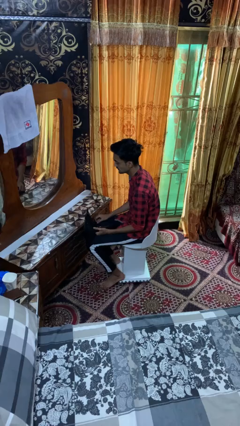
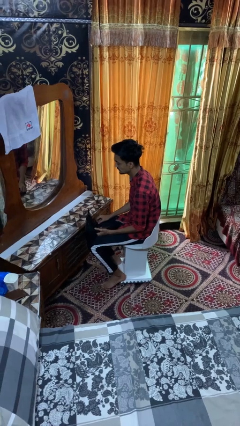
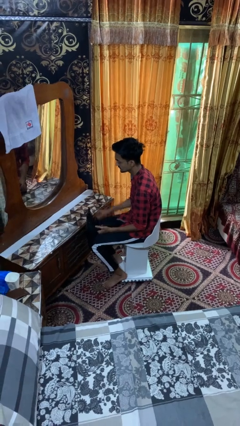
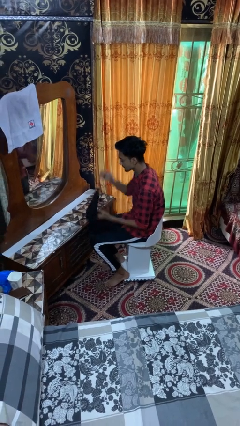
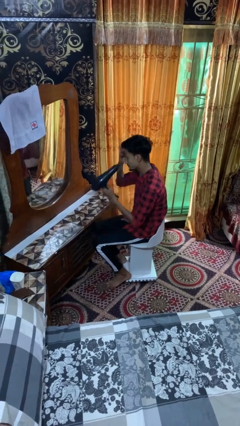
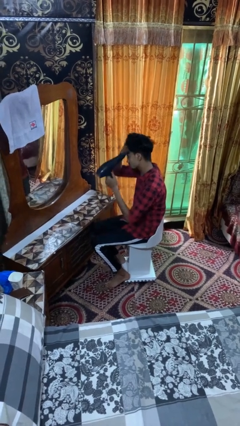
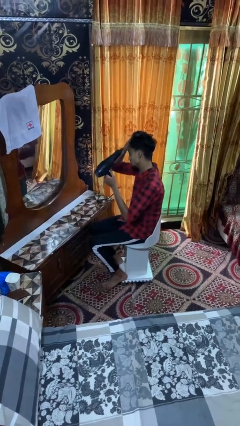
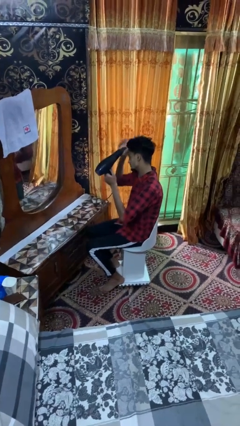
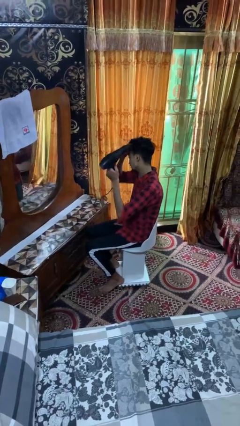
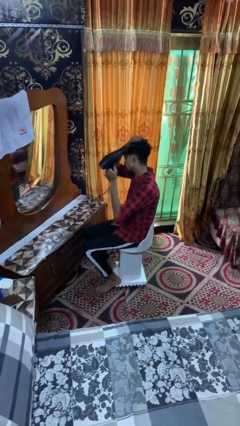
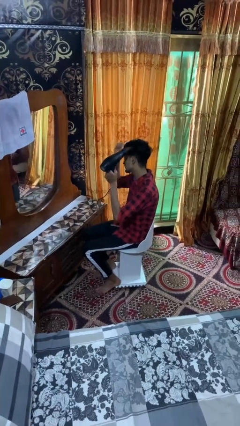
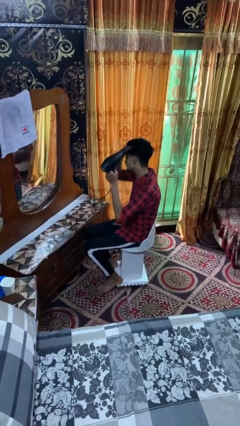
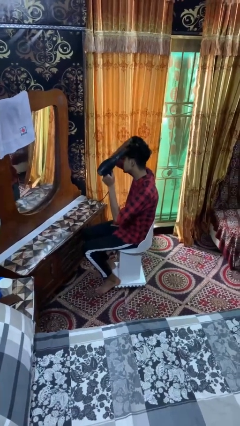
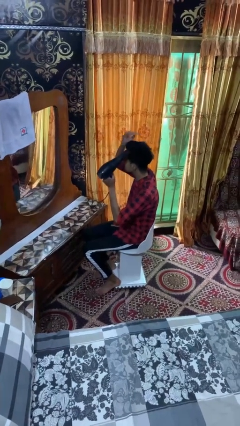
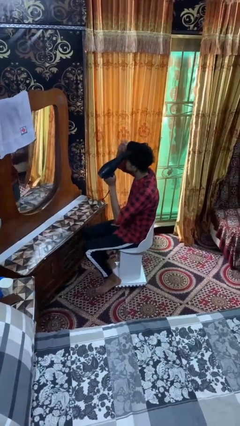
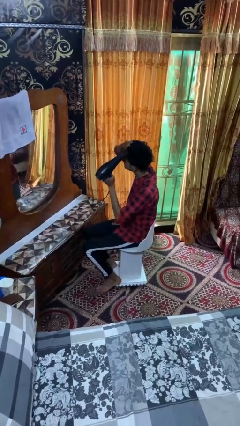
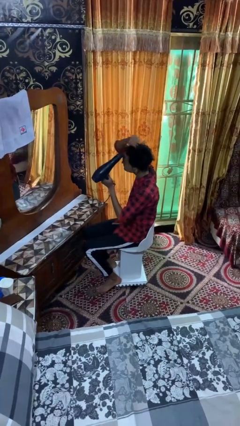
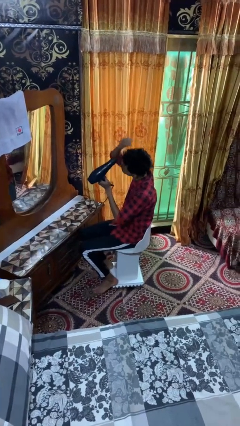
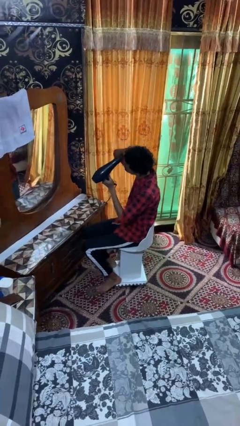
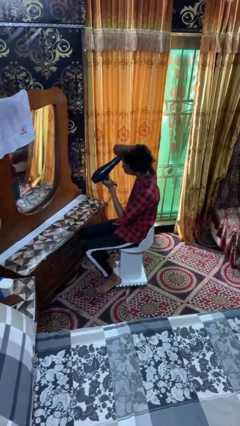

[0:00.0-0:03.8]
person dries hair with hairdryer

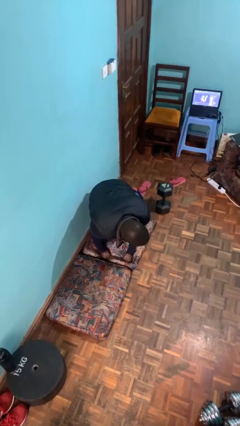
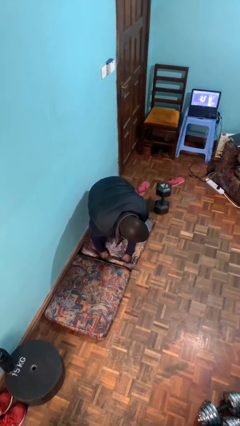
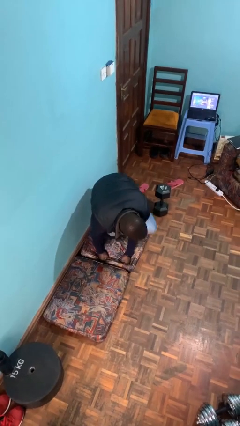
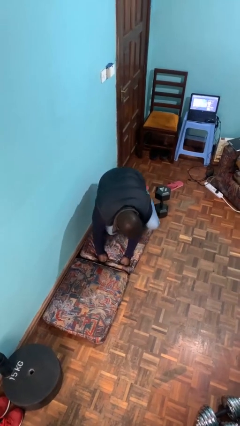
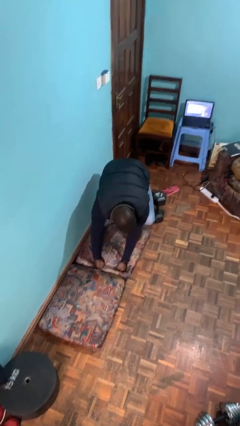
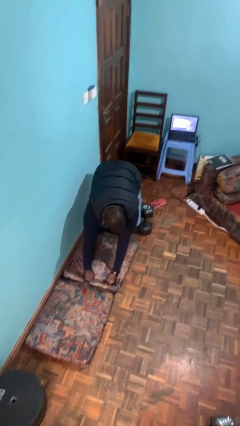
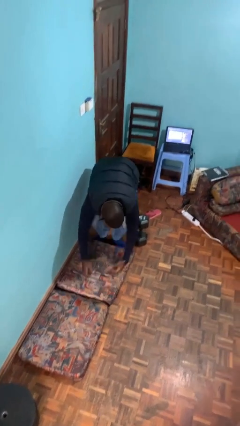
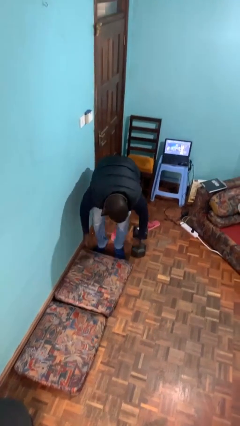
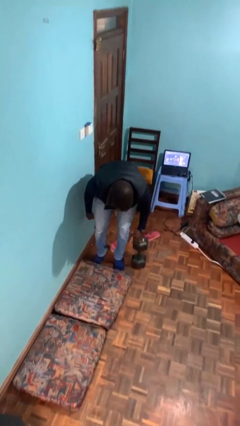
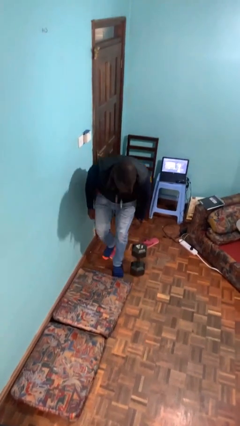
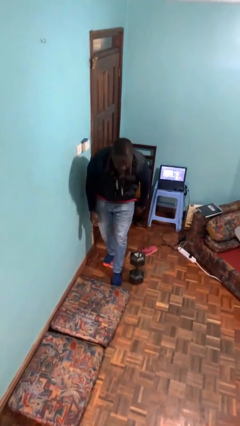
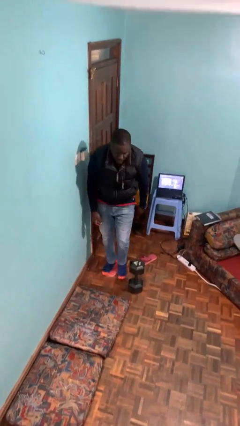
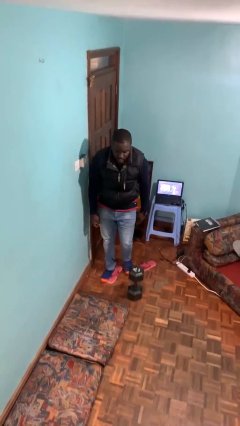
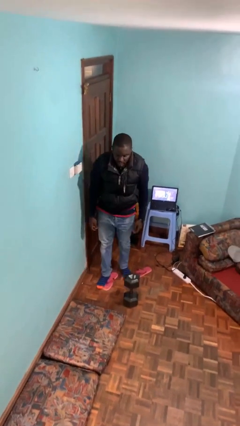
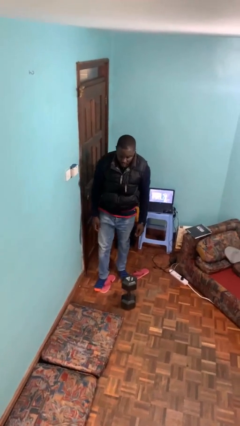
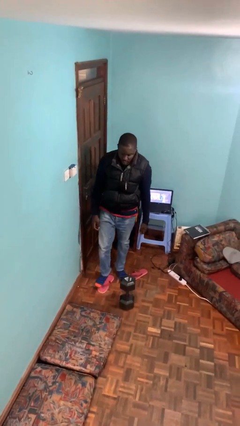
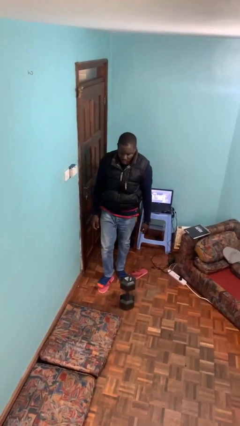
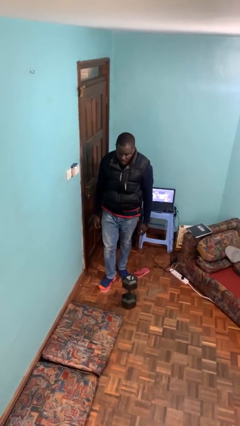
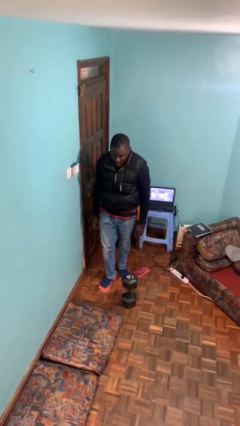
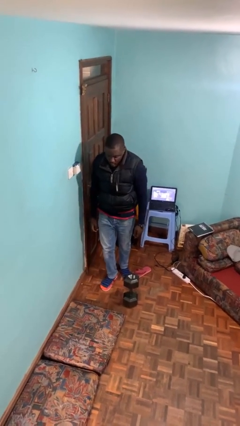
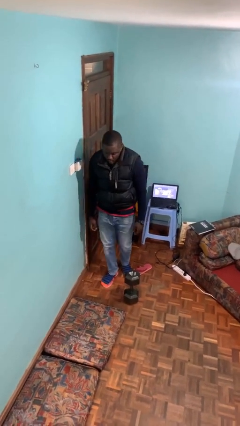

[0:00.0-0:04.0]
person stands up from floor

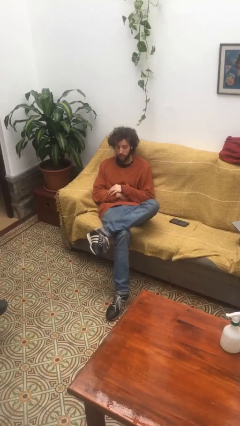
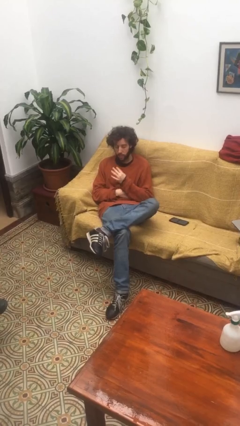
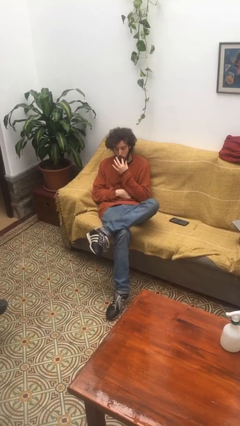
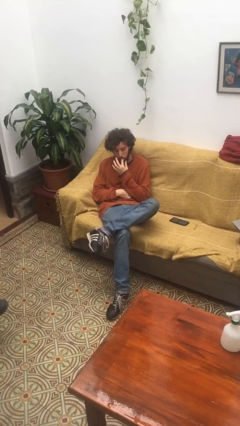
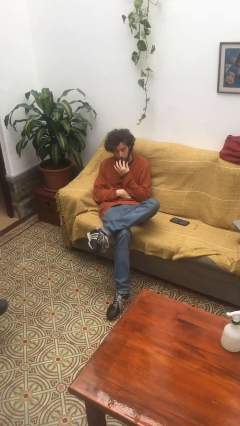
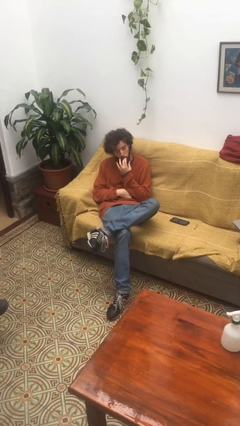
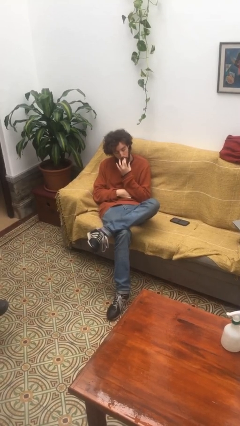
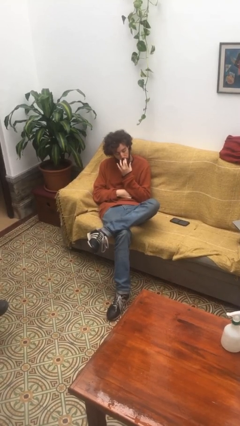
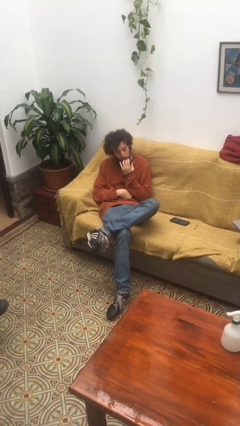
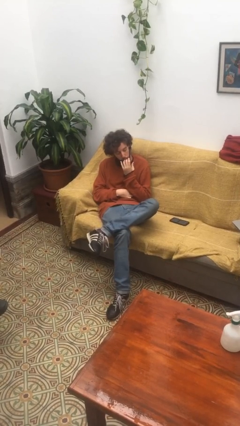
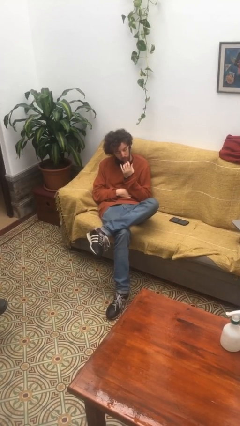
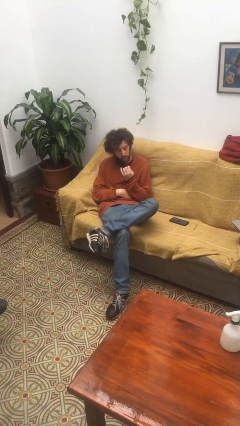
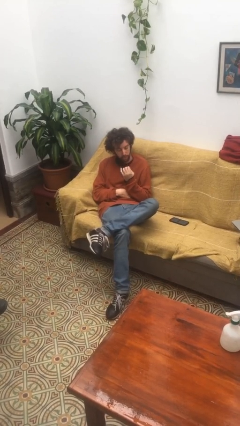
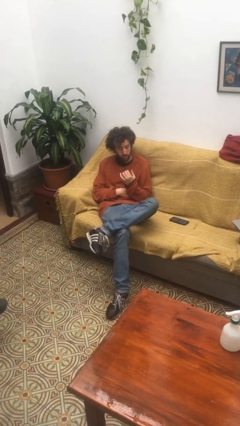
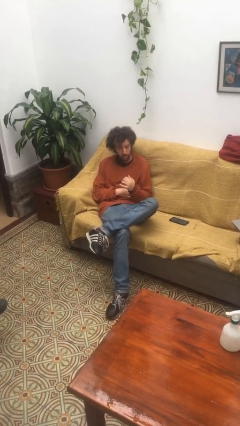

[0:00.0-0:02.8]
person licks fingers

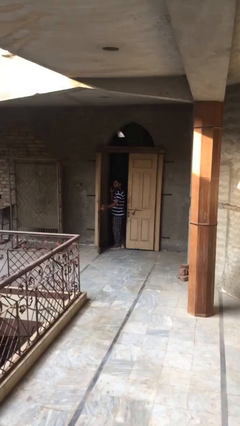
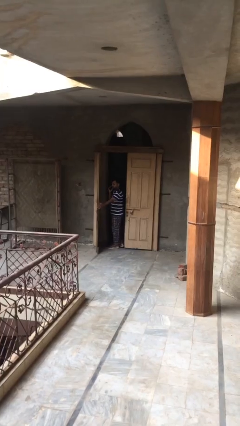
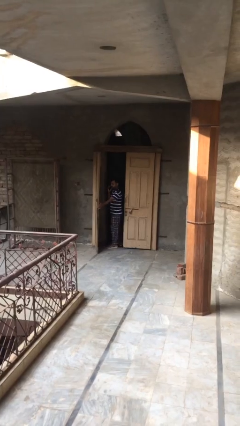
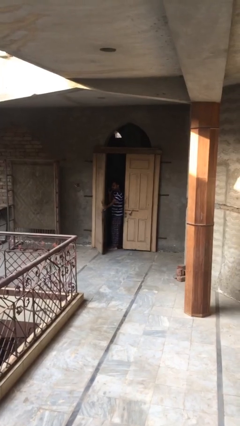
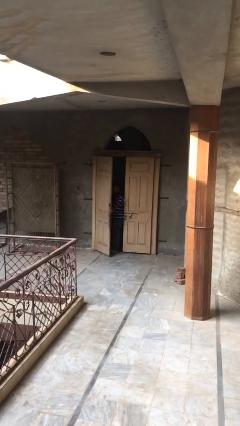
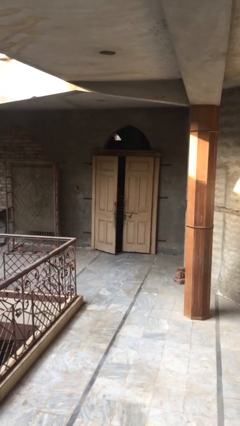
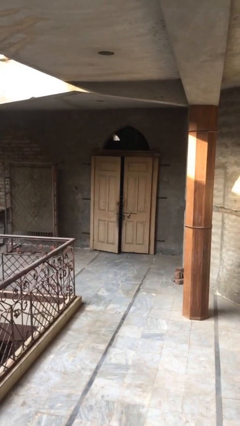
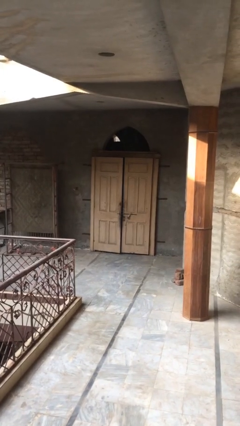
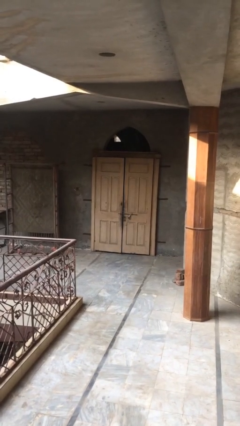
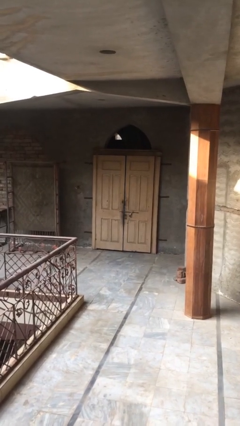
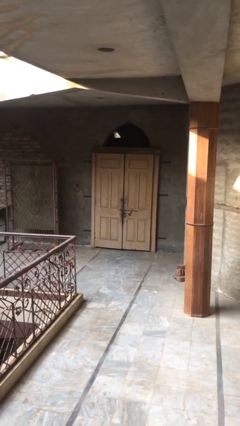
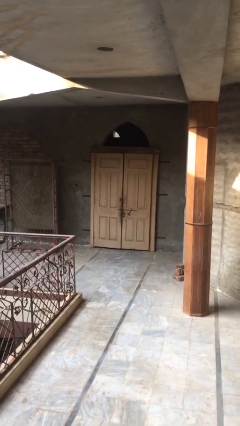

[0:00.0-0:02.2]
person closes facility door

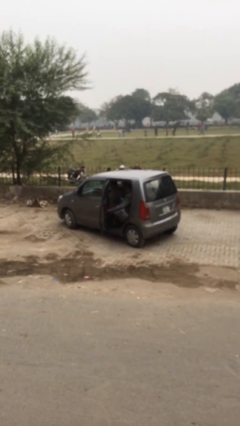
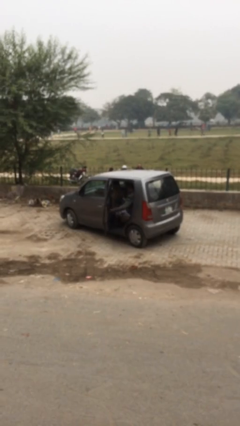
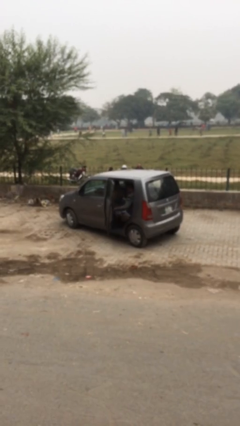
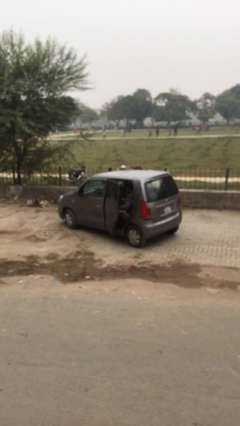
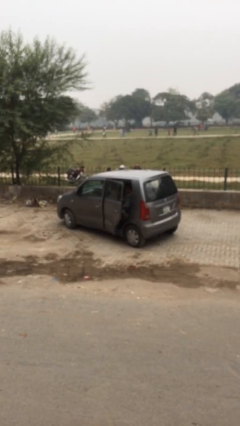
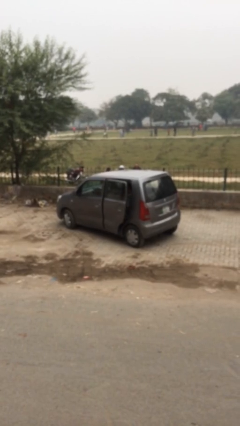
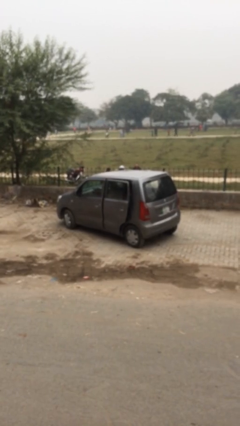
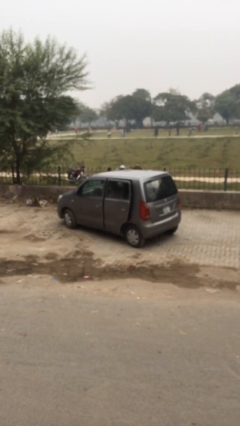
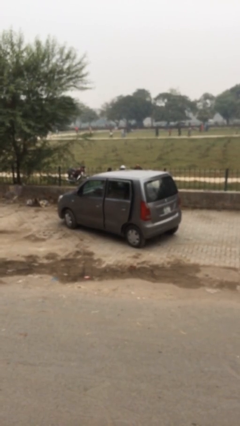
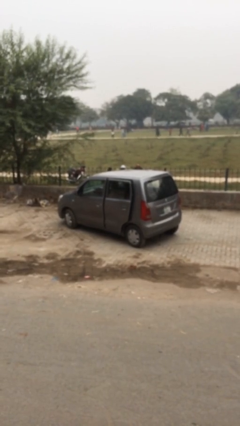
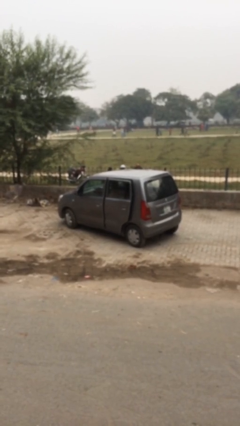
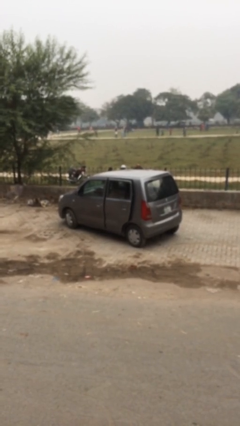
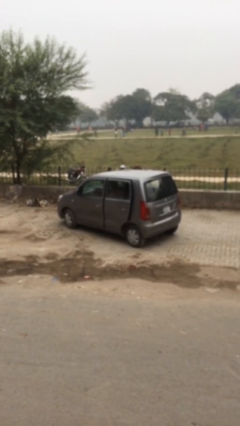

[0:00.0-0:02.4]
person closes car door

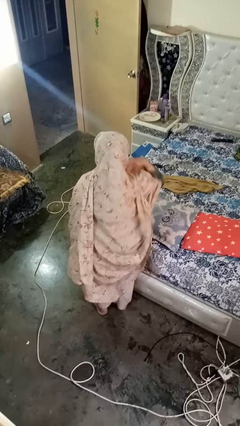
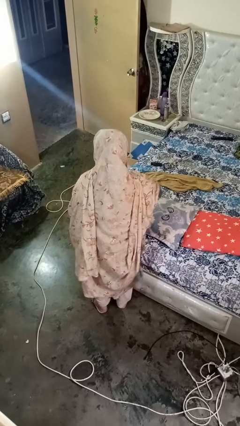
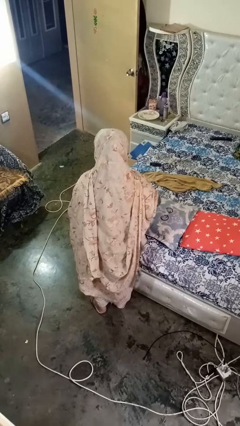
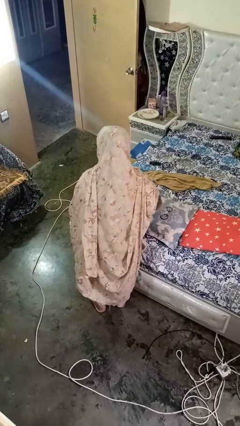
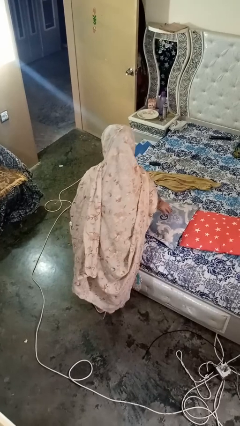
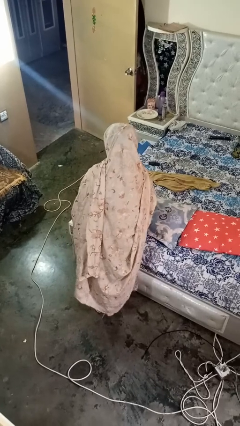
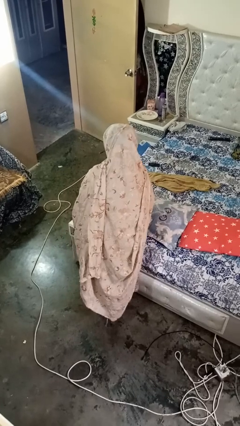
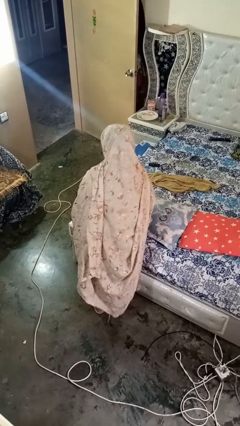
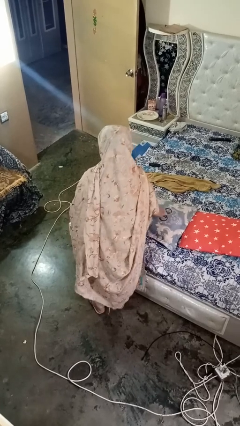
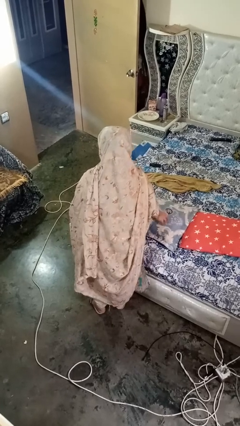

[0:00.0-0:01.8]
person taps object with finger

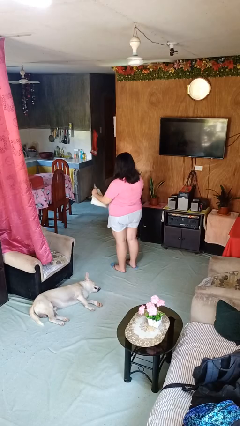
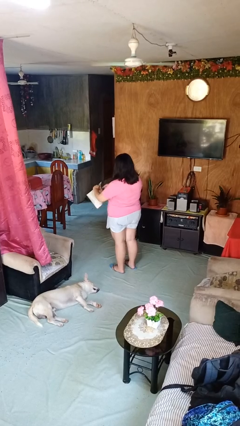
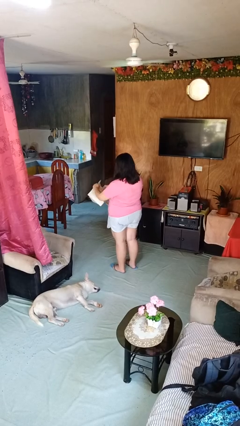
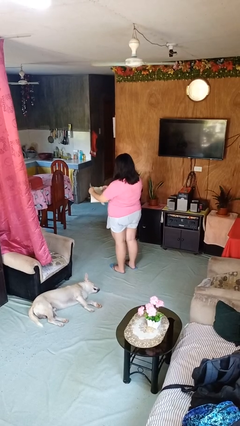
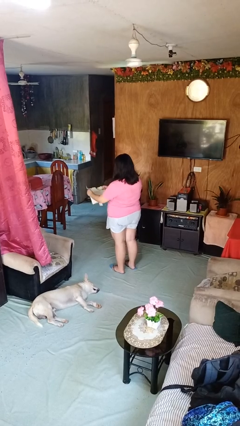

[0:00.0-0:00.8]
person tears paper
